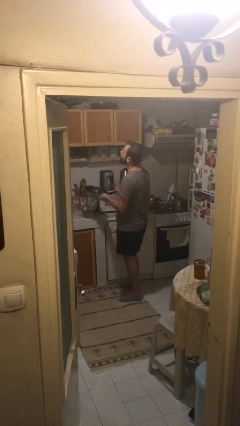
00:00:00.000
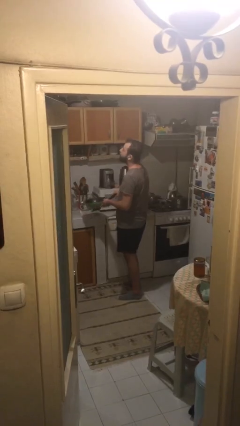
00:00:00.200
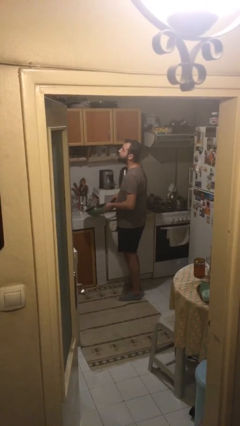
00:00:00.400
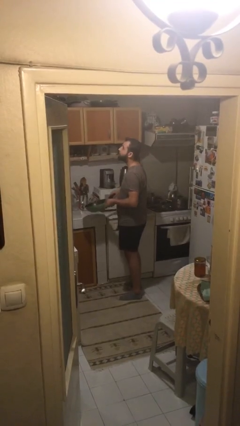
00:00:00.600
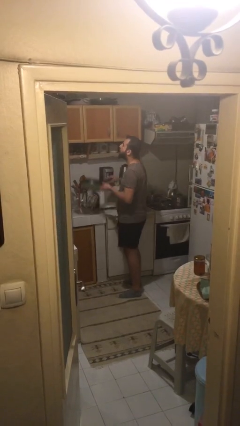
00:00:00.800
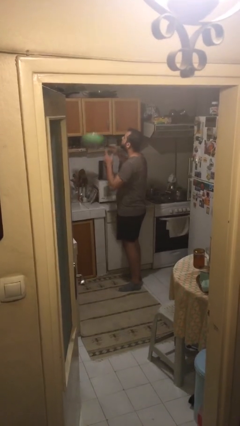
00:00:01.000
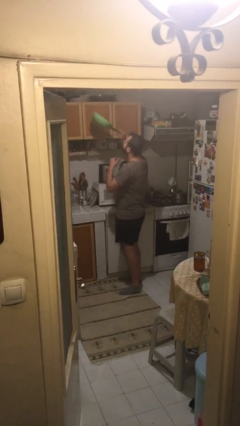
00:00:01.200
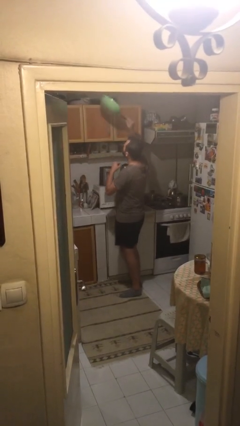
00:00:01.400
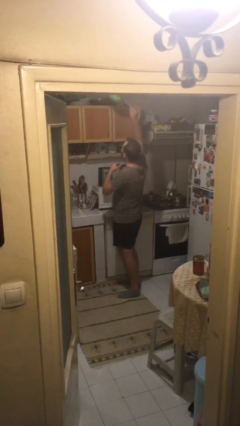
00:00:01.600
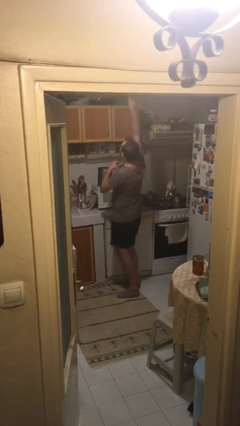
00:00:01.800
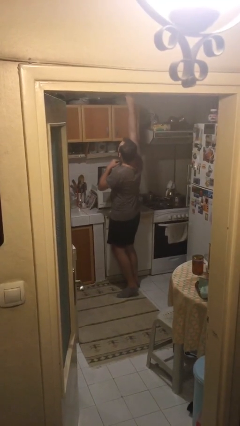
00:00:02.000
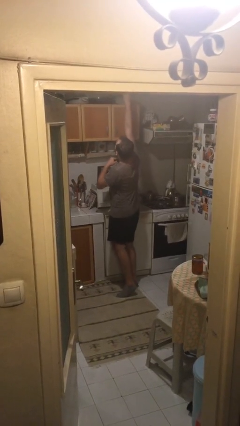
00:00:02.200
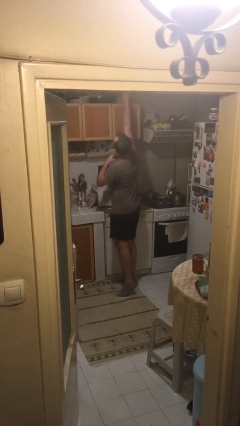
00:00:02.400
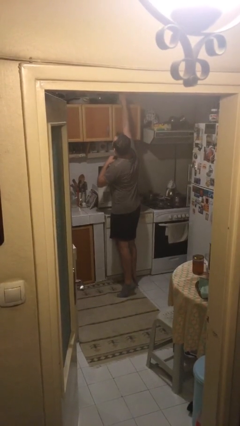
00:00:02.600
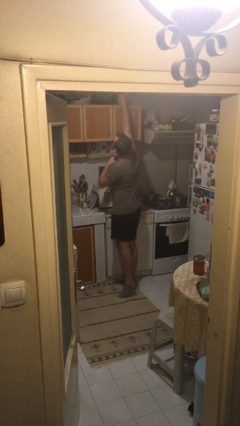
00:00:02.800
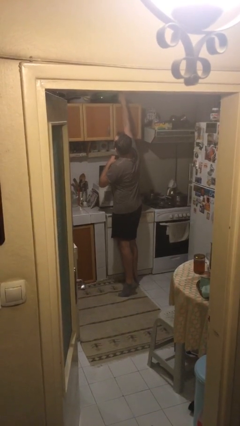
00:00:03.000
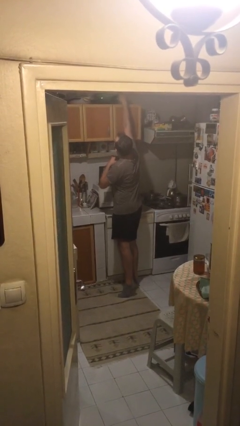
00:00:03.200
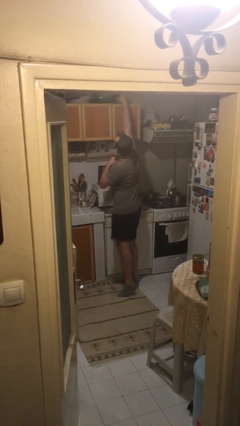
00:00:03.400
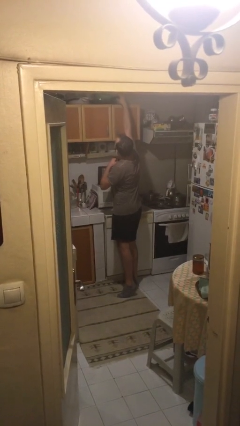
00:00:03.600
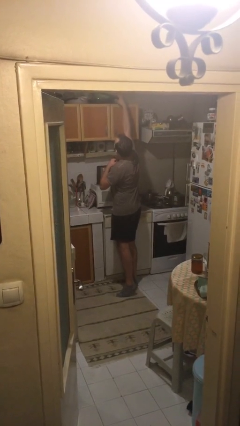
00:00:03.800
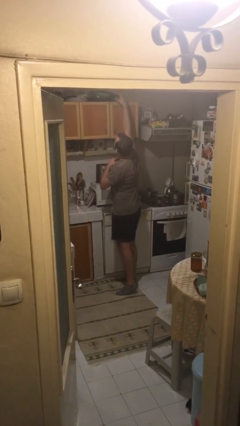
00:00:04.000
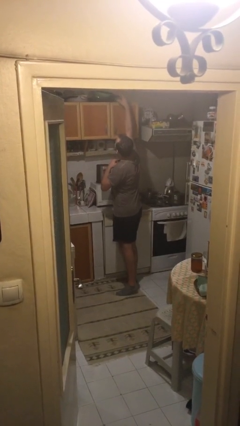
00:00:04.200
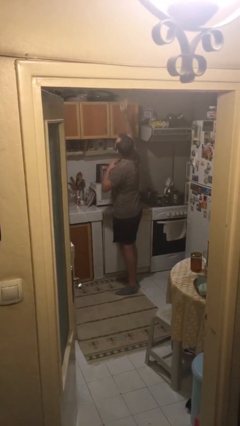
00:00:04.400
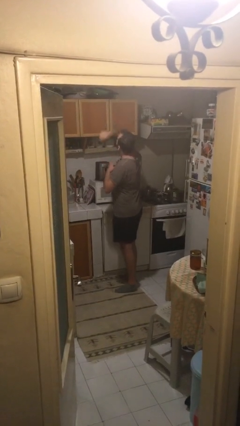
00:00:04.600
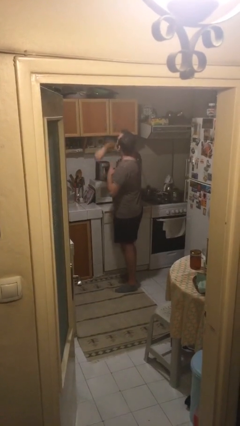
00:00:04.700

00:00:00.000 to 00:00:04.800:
person picks up object from table

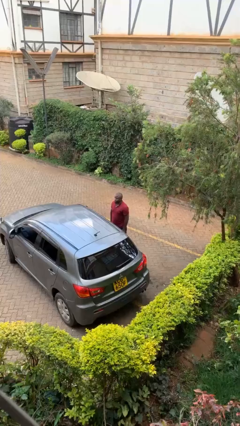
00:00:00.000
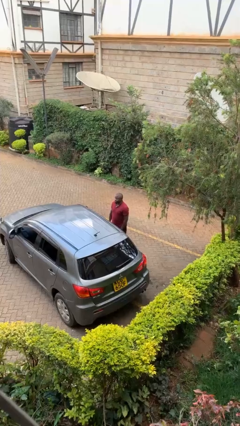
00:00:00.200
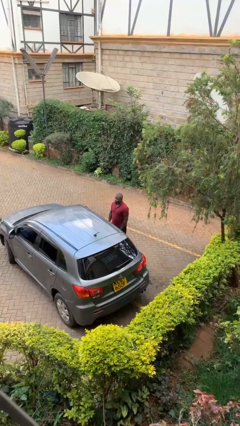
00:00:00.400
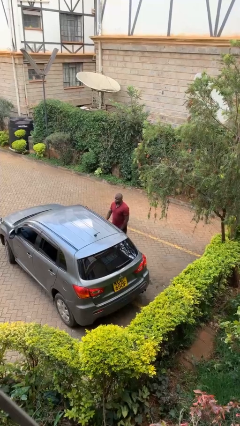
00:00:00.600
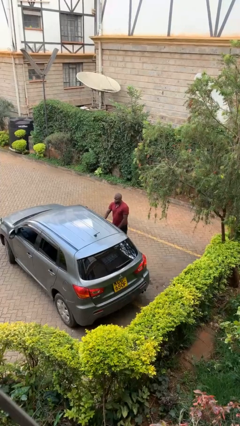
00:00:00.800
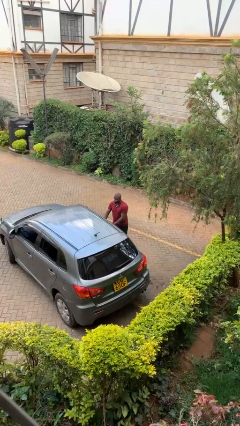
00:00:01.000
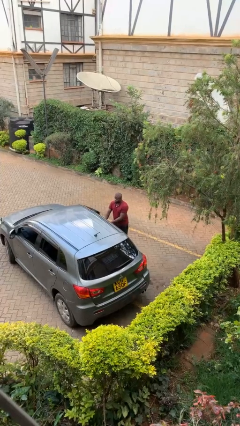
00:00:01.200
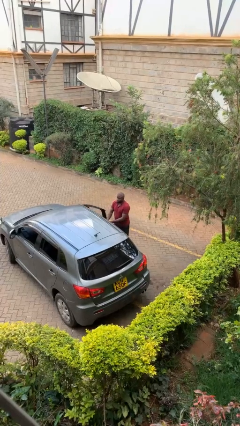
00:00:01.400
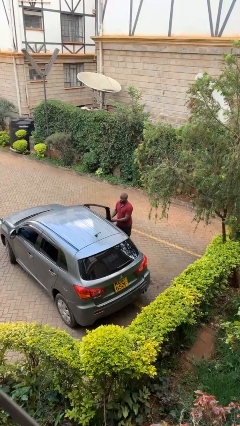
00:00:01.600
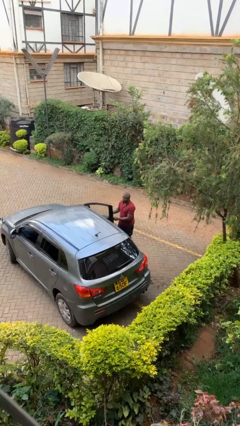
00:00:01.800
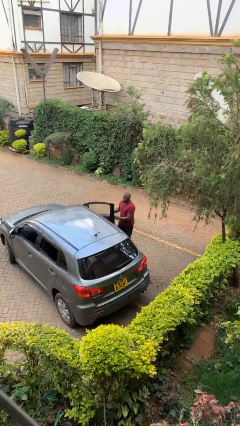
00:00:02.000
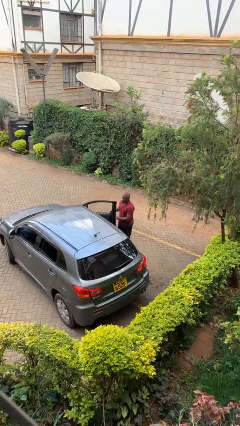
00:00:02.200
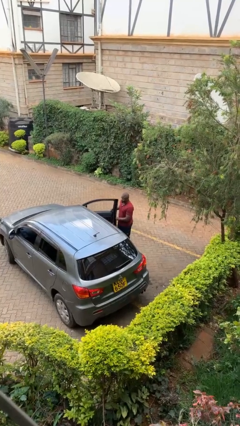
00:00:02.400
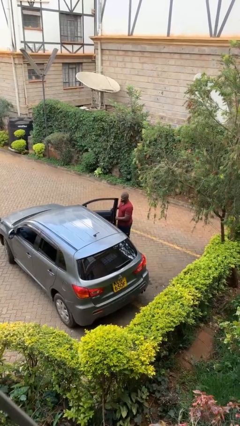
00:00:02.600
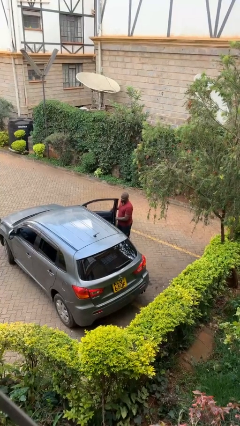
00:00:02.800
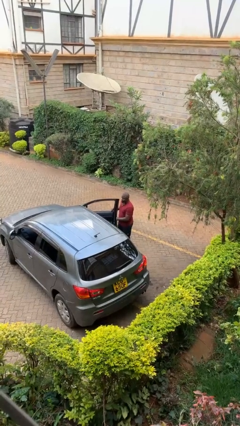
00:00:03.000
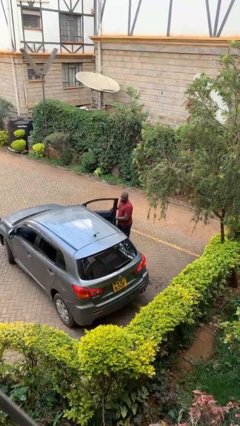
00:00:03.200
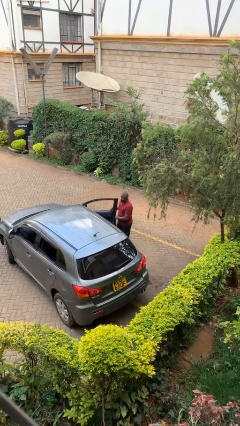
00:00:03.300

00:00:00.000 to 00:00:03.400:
person opens car door

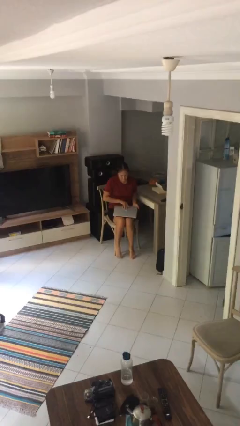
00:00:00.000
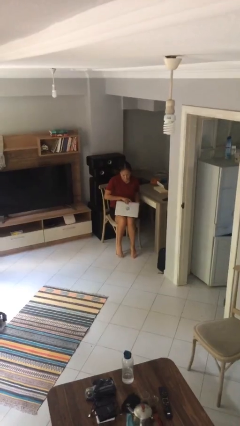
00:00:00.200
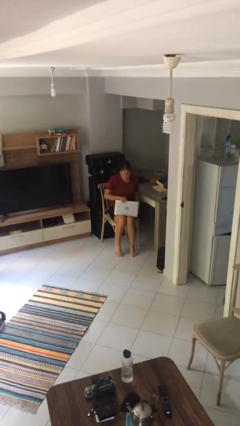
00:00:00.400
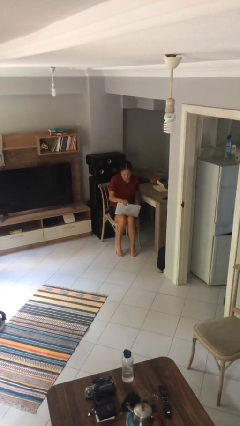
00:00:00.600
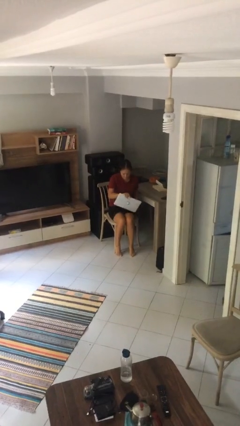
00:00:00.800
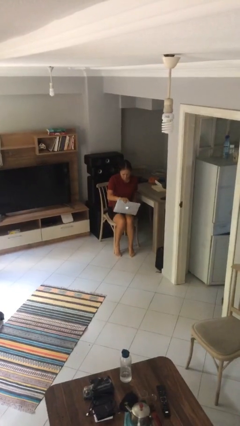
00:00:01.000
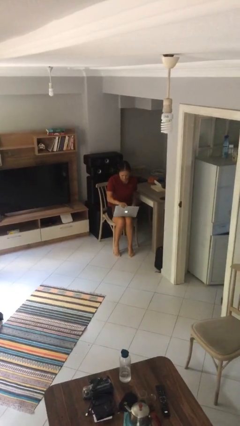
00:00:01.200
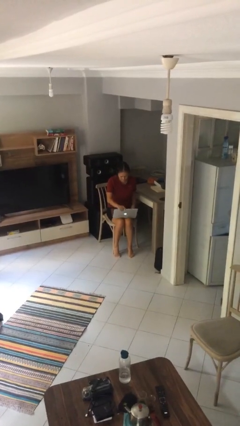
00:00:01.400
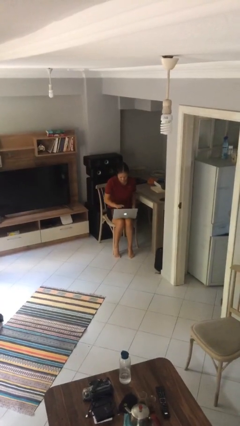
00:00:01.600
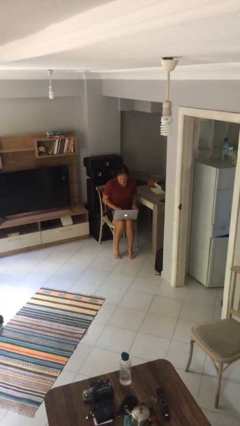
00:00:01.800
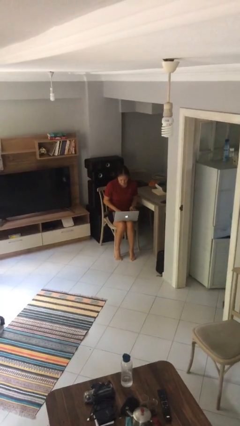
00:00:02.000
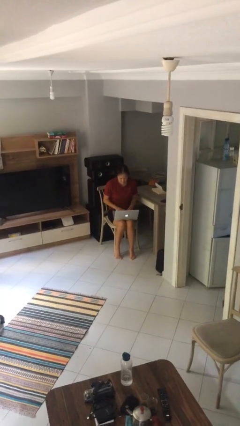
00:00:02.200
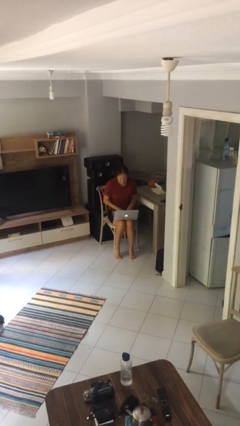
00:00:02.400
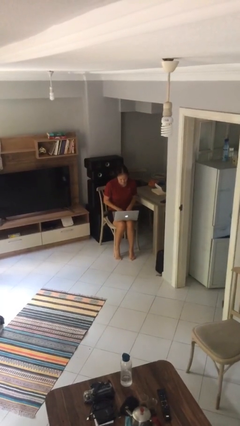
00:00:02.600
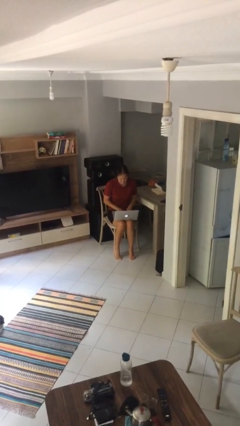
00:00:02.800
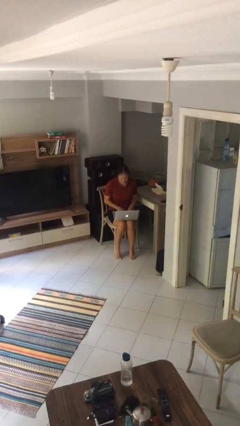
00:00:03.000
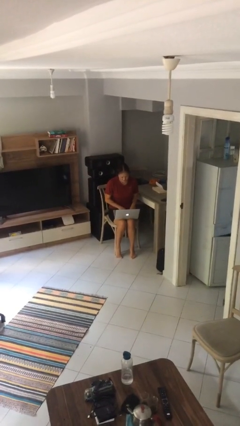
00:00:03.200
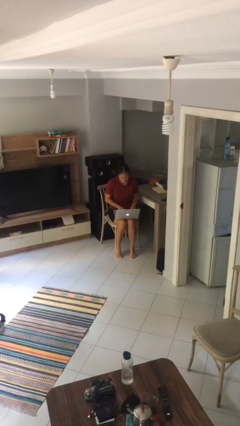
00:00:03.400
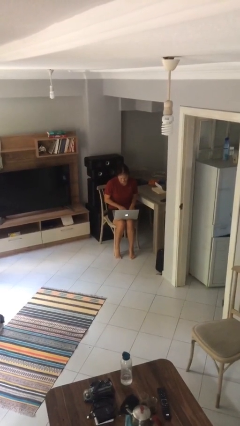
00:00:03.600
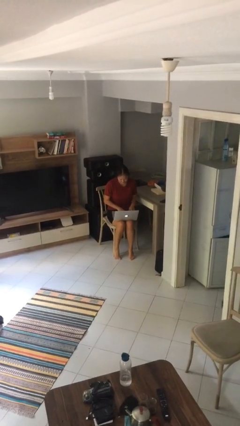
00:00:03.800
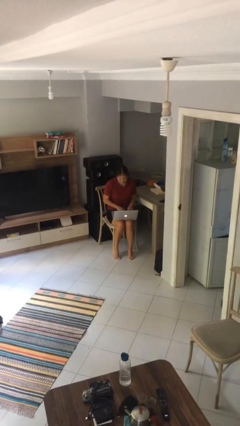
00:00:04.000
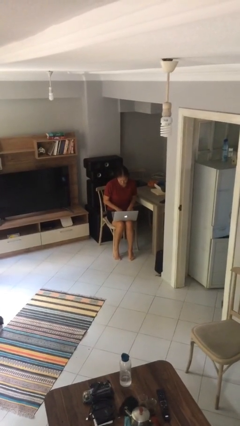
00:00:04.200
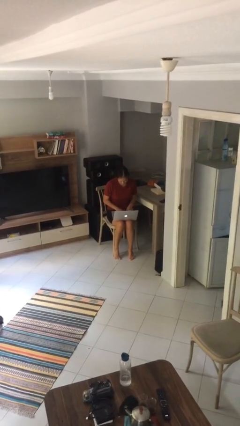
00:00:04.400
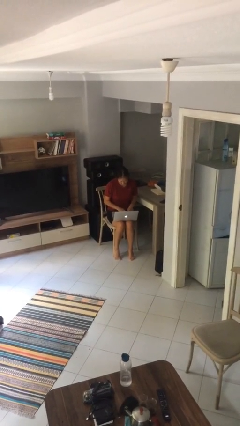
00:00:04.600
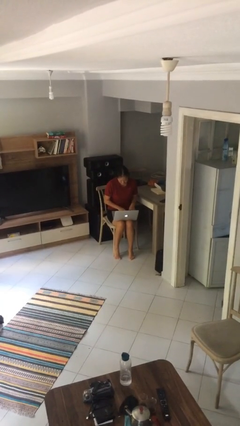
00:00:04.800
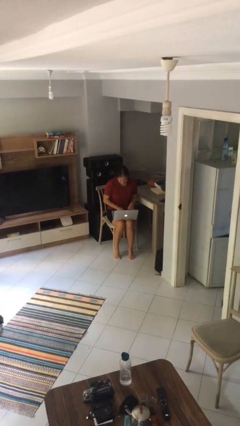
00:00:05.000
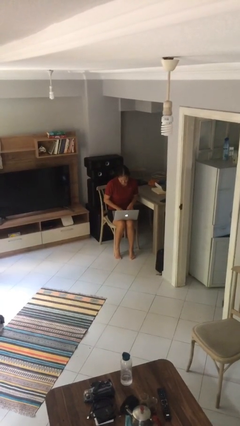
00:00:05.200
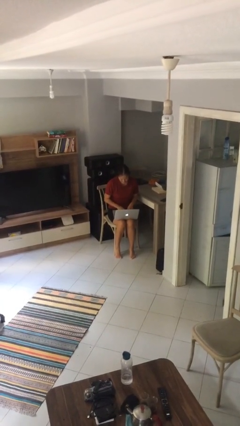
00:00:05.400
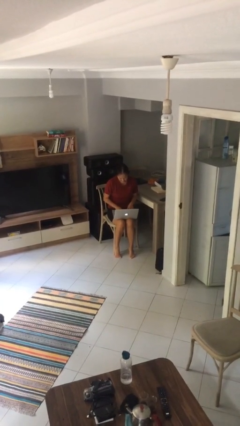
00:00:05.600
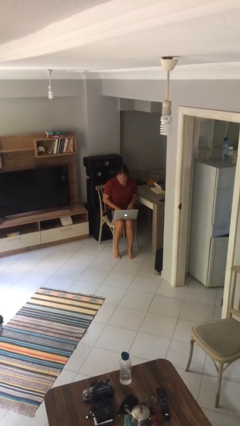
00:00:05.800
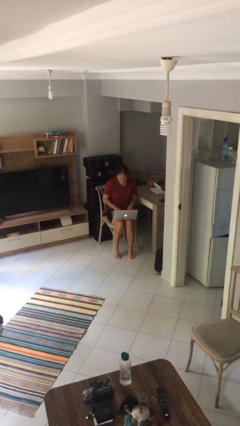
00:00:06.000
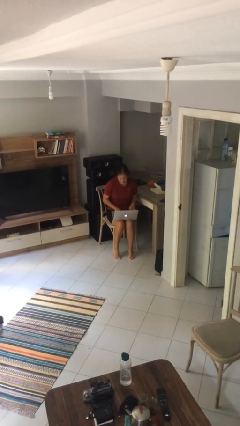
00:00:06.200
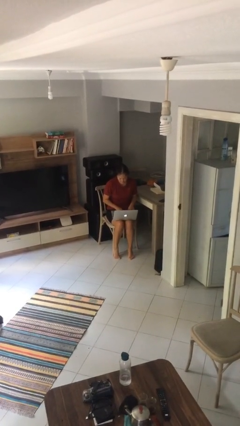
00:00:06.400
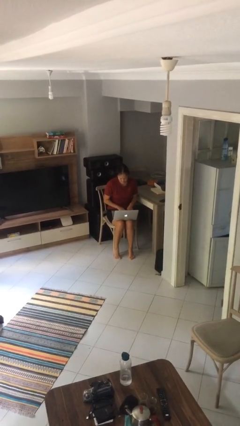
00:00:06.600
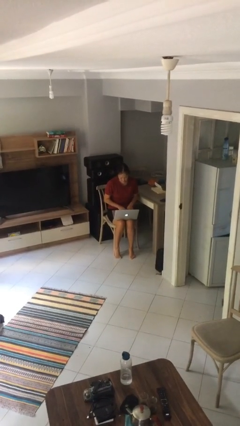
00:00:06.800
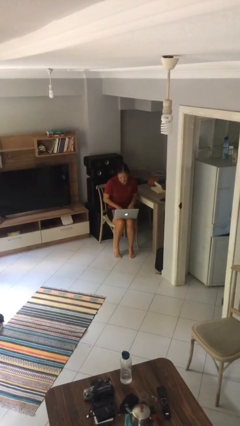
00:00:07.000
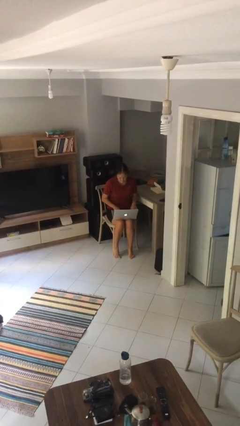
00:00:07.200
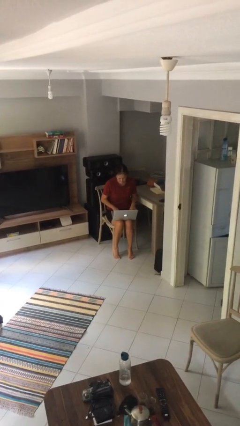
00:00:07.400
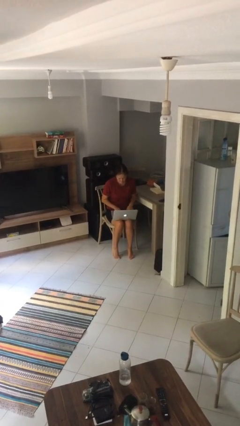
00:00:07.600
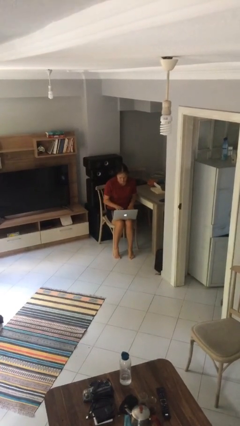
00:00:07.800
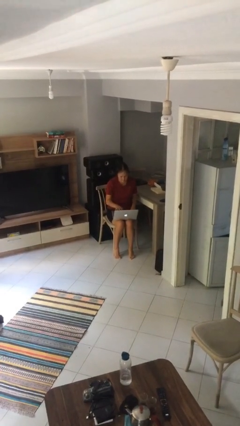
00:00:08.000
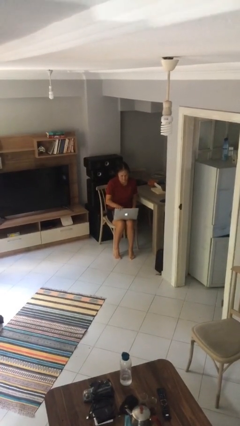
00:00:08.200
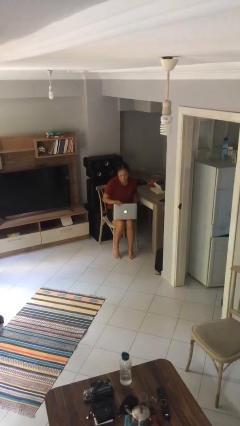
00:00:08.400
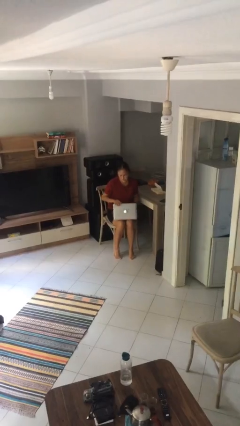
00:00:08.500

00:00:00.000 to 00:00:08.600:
person interacts with laptop

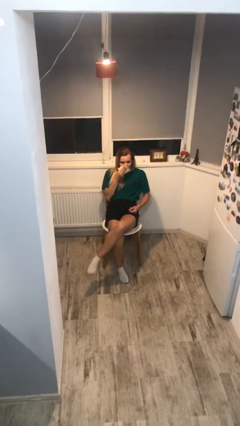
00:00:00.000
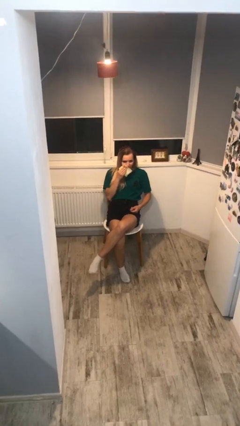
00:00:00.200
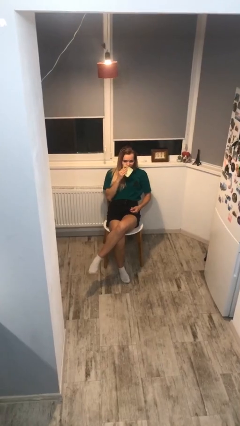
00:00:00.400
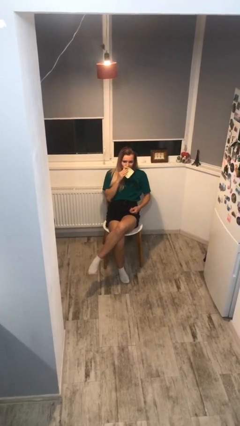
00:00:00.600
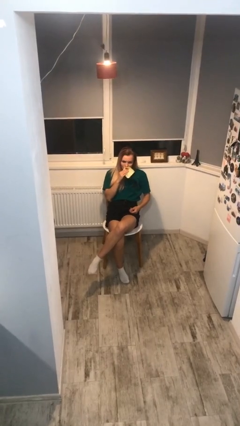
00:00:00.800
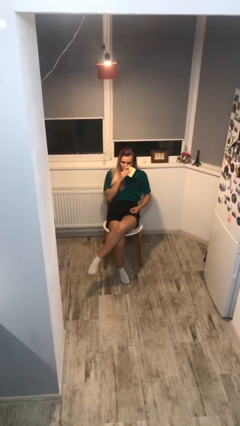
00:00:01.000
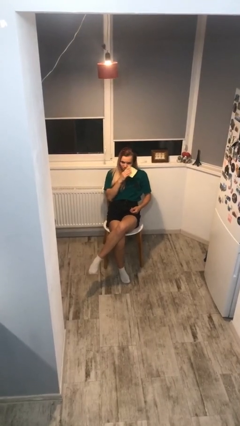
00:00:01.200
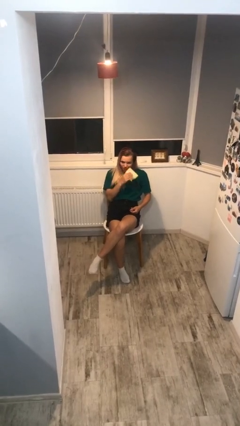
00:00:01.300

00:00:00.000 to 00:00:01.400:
person wipes mouth with napkin

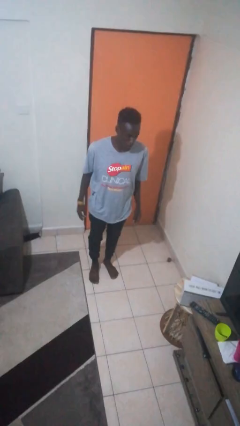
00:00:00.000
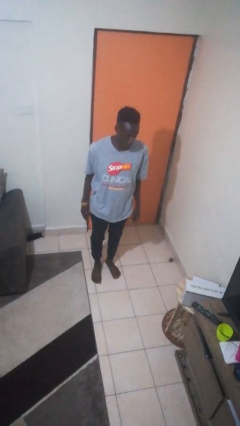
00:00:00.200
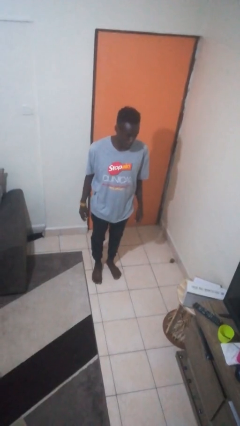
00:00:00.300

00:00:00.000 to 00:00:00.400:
person exercises with lunges
